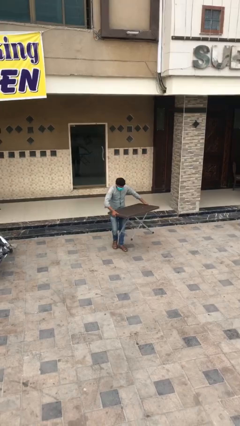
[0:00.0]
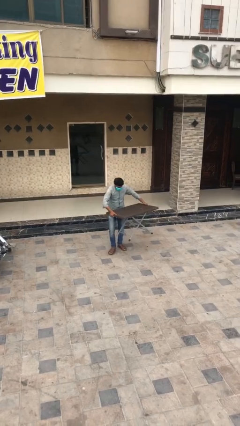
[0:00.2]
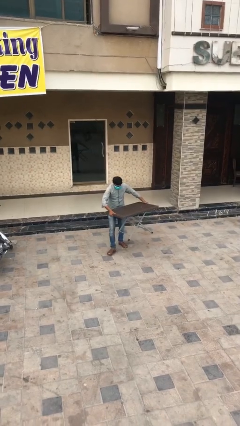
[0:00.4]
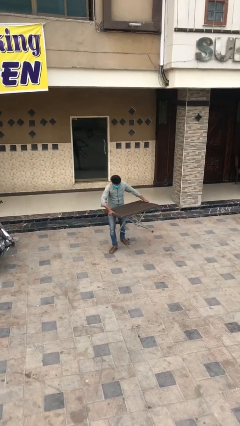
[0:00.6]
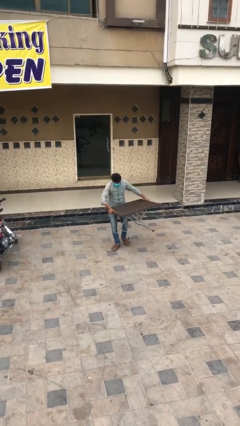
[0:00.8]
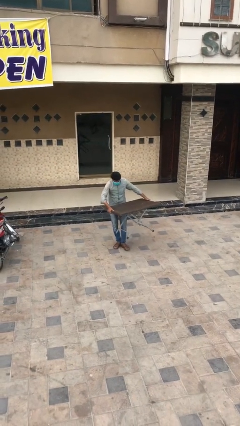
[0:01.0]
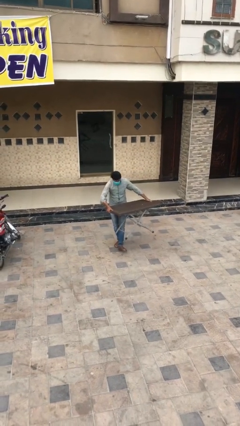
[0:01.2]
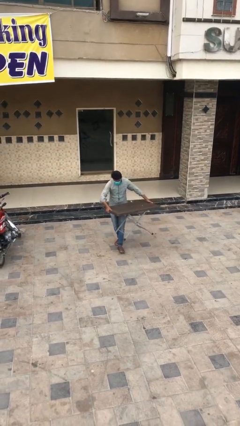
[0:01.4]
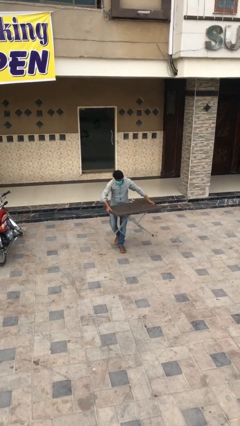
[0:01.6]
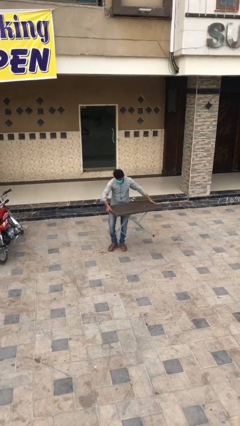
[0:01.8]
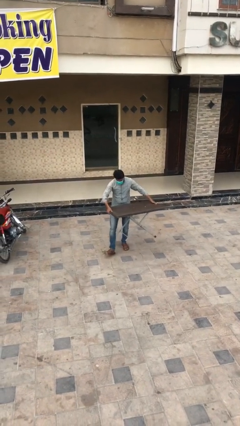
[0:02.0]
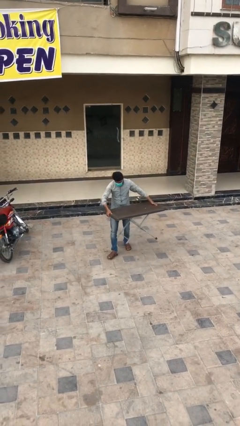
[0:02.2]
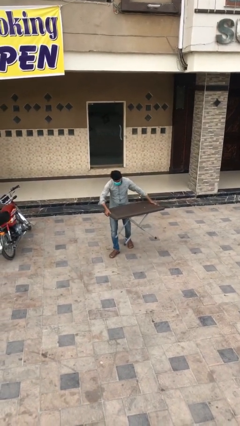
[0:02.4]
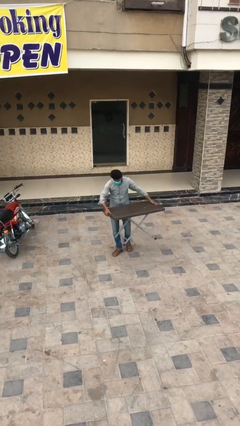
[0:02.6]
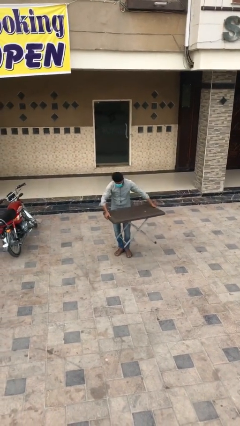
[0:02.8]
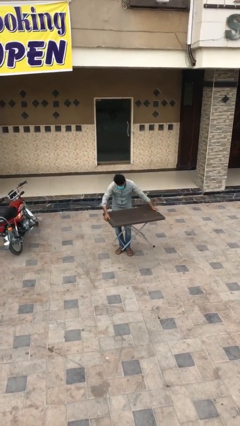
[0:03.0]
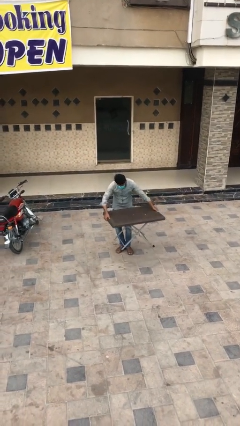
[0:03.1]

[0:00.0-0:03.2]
person carries heavy object

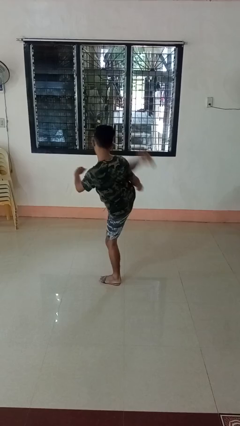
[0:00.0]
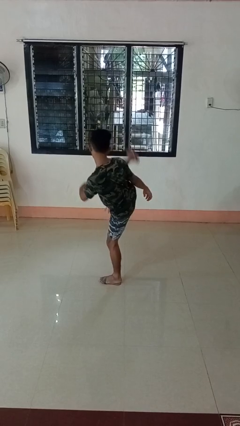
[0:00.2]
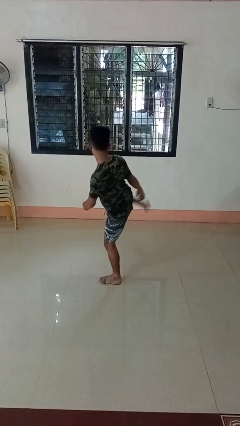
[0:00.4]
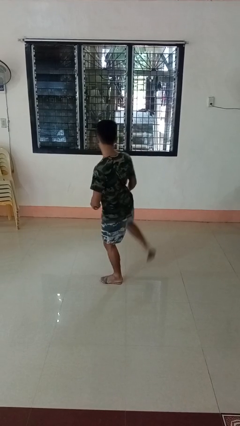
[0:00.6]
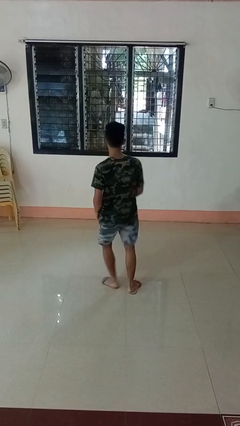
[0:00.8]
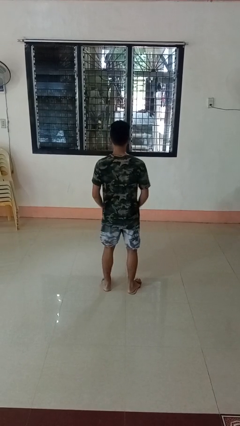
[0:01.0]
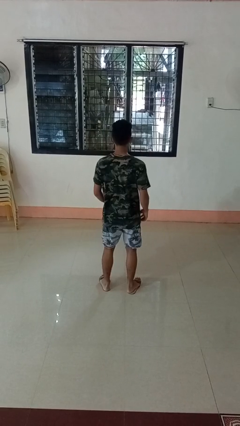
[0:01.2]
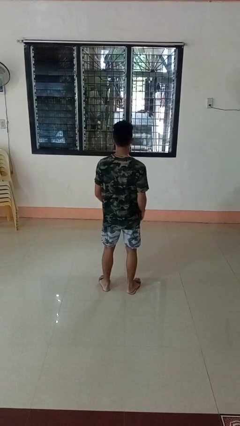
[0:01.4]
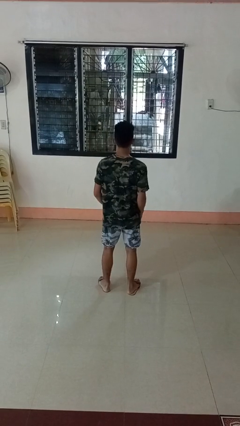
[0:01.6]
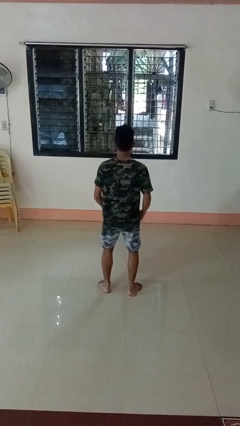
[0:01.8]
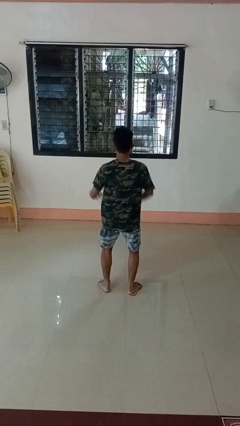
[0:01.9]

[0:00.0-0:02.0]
person karate kicks

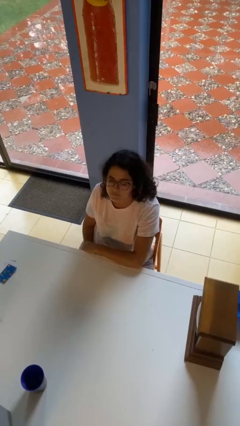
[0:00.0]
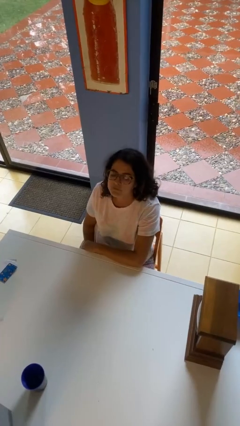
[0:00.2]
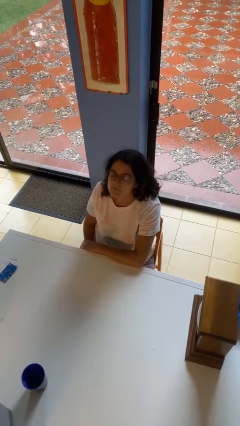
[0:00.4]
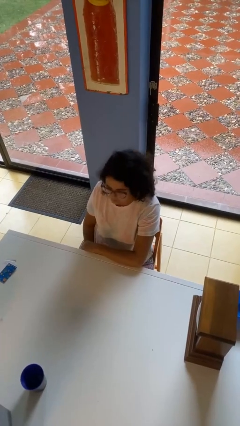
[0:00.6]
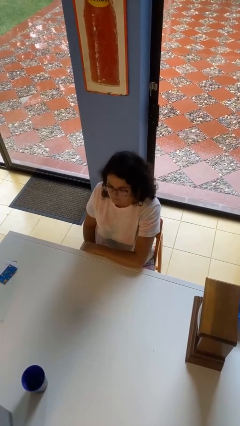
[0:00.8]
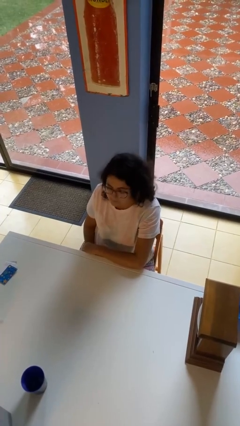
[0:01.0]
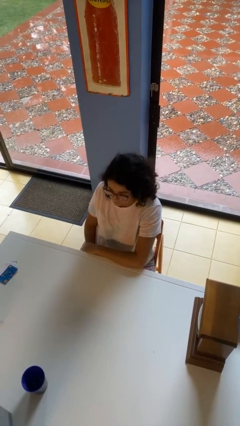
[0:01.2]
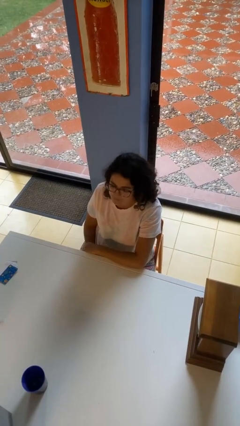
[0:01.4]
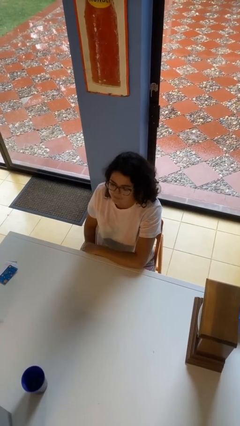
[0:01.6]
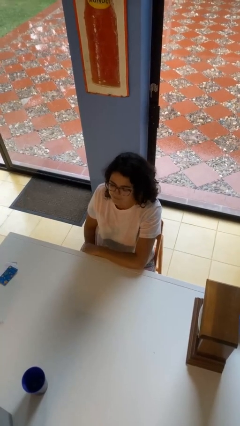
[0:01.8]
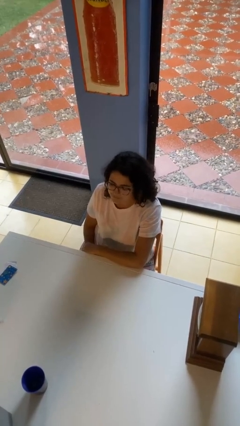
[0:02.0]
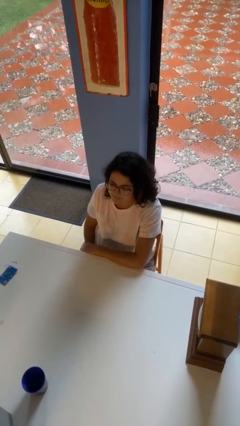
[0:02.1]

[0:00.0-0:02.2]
person nods head

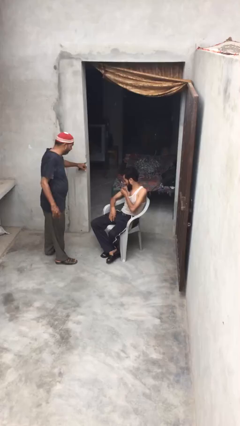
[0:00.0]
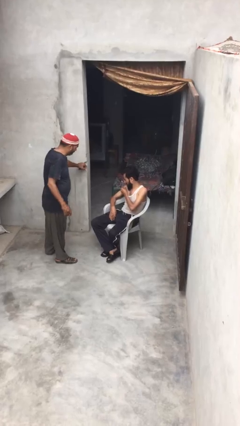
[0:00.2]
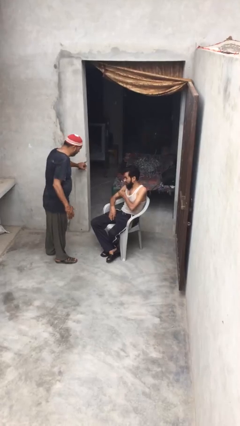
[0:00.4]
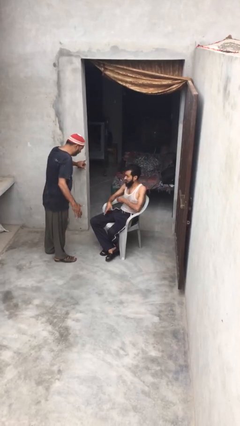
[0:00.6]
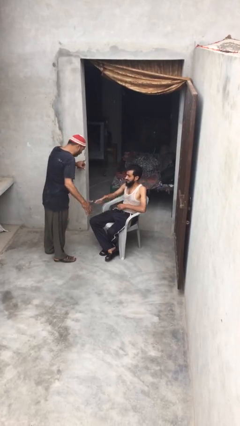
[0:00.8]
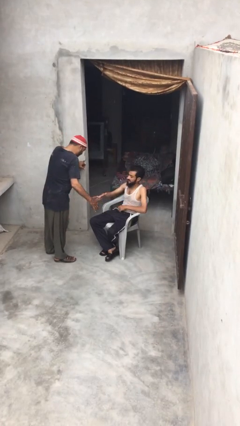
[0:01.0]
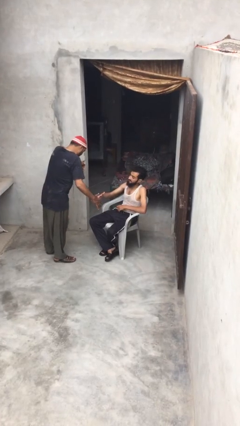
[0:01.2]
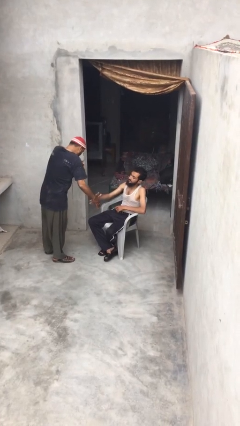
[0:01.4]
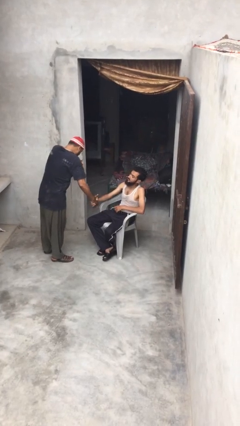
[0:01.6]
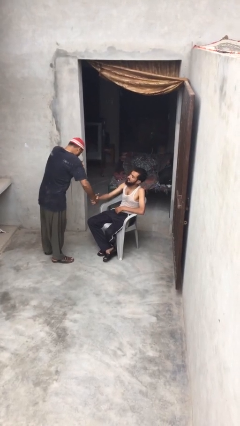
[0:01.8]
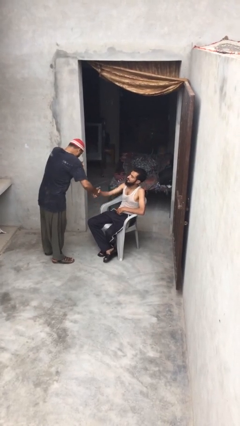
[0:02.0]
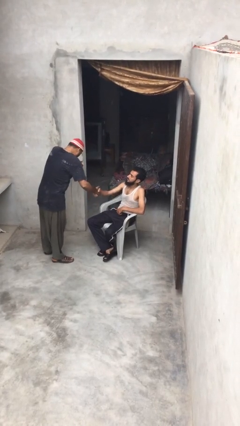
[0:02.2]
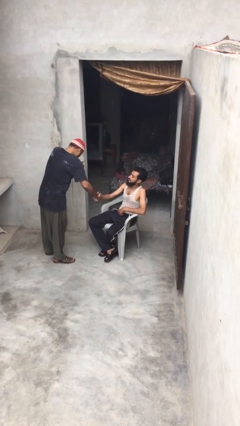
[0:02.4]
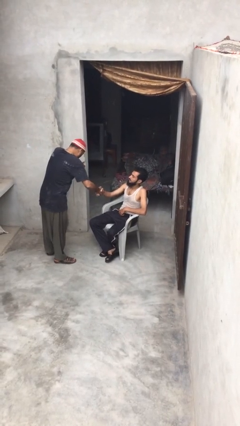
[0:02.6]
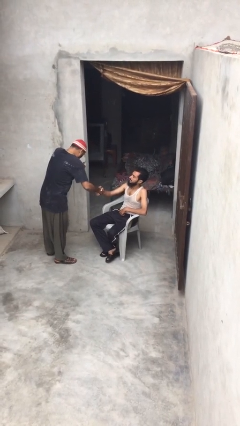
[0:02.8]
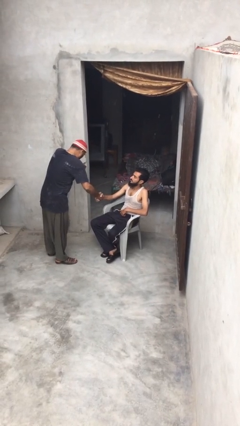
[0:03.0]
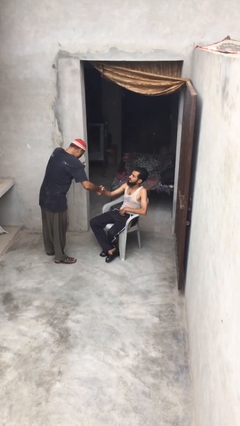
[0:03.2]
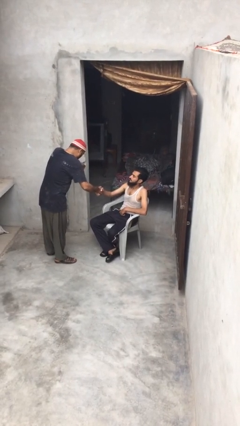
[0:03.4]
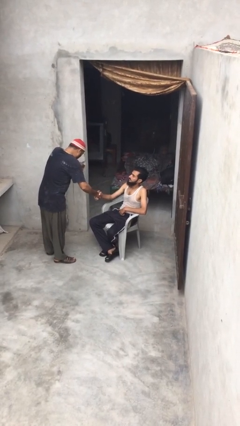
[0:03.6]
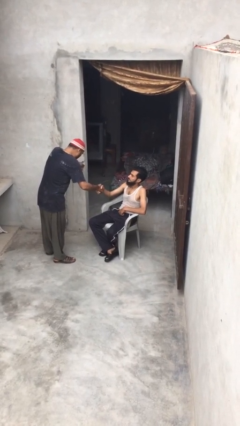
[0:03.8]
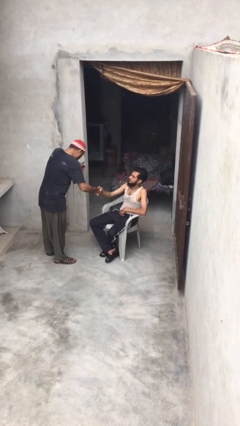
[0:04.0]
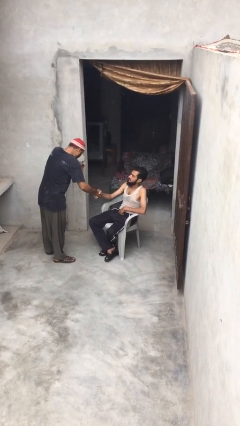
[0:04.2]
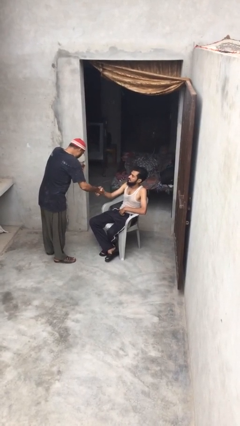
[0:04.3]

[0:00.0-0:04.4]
person shakes hand

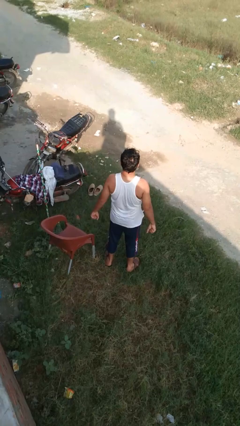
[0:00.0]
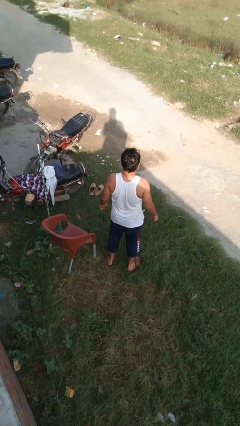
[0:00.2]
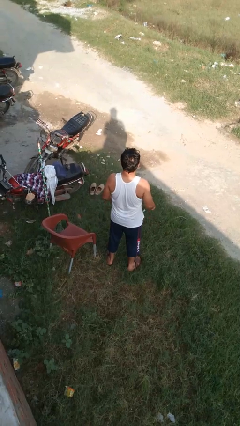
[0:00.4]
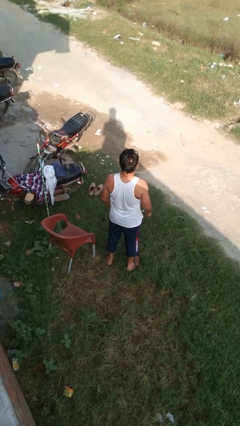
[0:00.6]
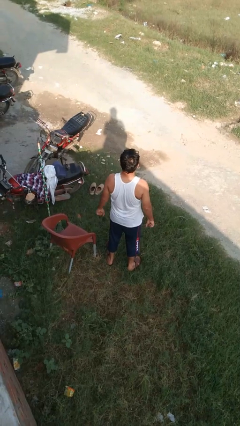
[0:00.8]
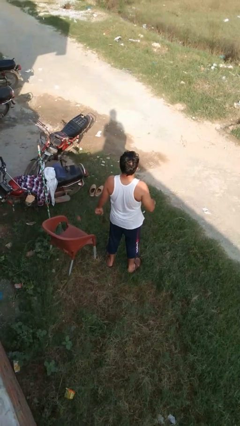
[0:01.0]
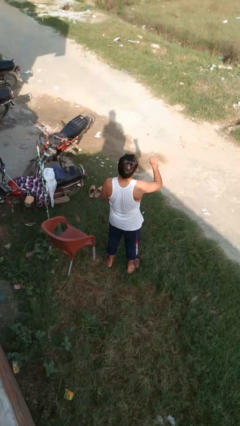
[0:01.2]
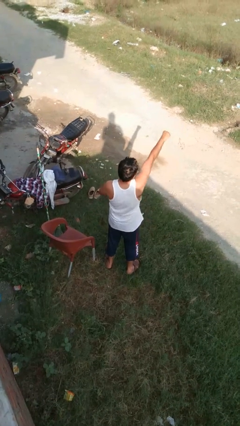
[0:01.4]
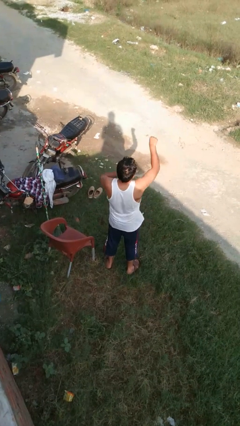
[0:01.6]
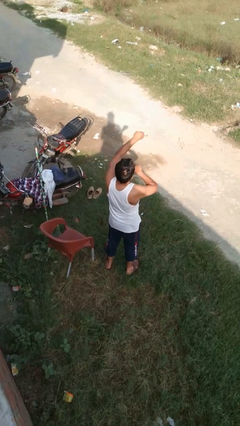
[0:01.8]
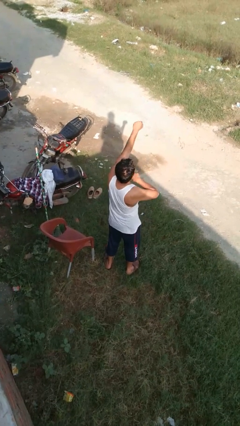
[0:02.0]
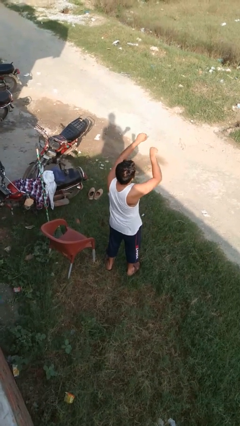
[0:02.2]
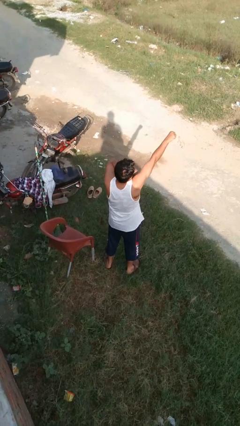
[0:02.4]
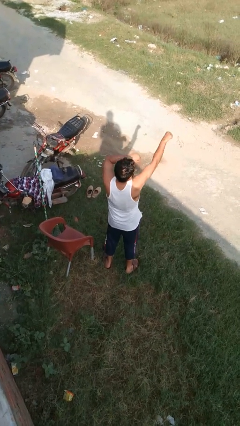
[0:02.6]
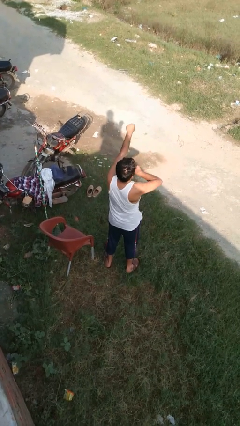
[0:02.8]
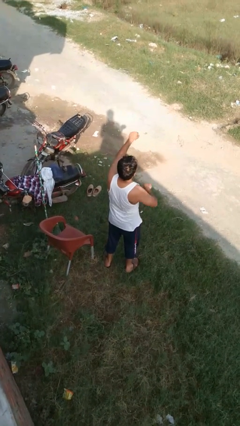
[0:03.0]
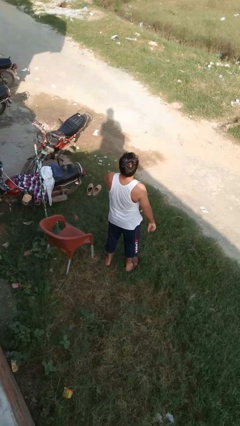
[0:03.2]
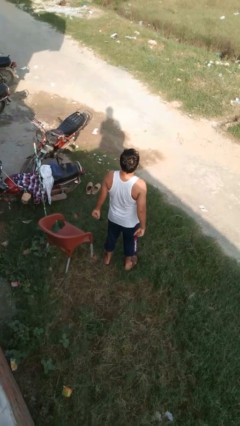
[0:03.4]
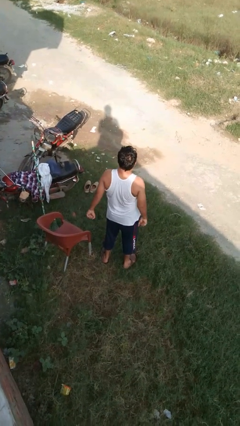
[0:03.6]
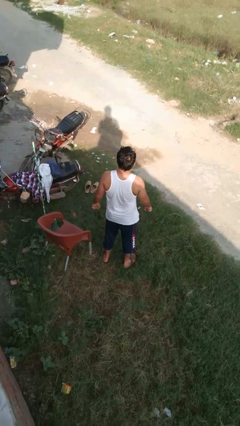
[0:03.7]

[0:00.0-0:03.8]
person punches

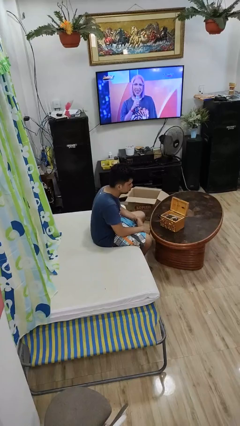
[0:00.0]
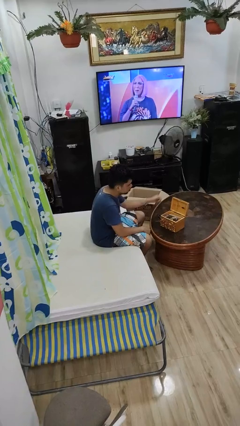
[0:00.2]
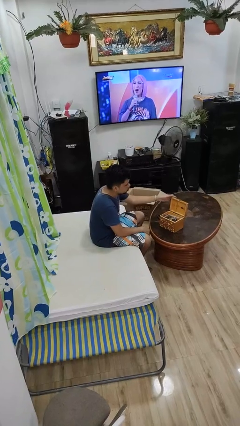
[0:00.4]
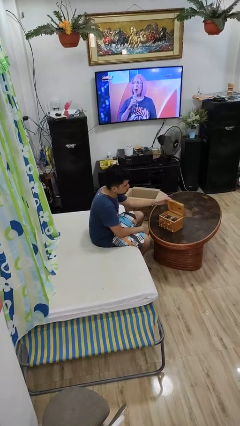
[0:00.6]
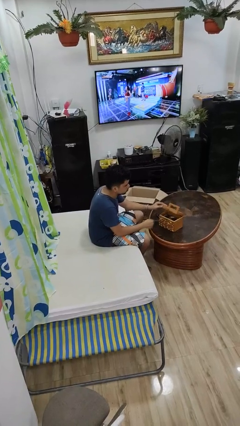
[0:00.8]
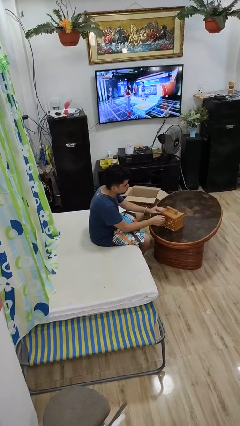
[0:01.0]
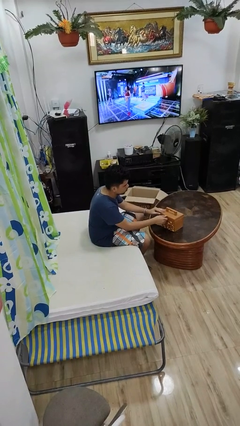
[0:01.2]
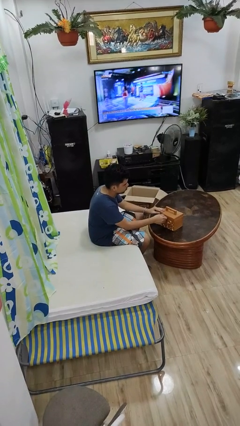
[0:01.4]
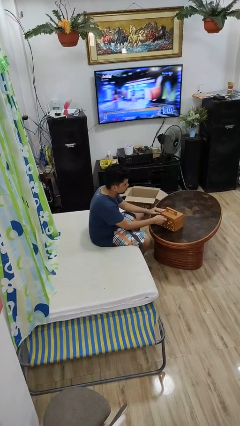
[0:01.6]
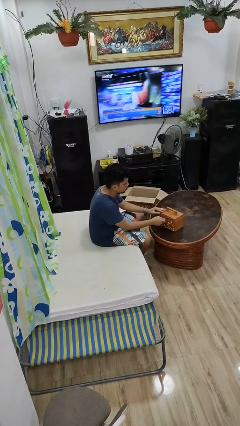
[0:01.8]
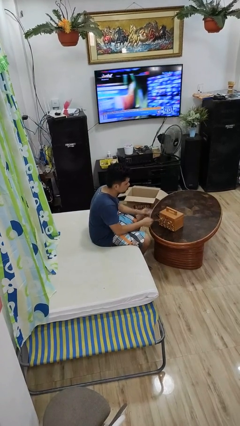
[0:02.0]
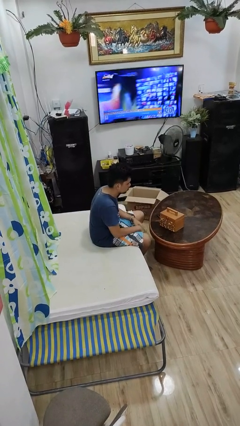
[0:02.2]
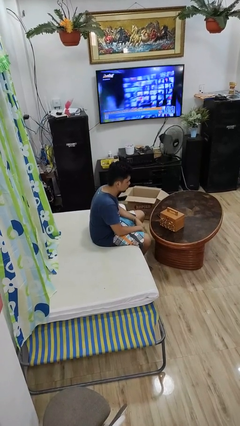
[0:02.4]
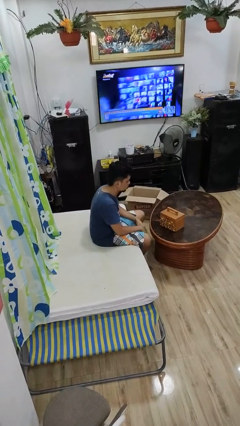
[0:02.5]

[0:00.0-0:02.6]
person closes jewelry box
